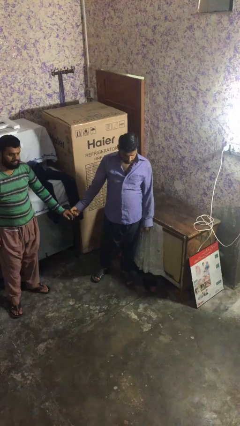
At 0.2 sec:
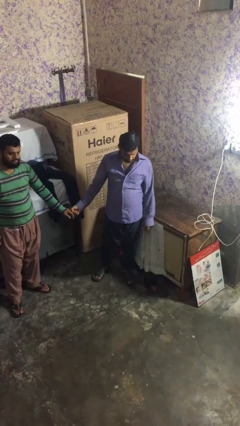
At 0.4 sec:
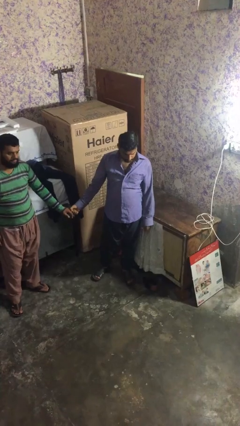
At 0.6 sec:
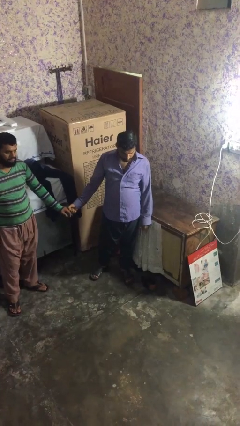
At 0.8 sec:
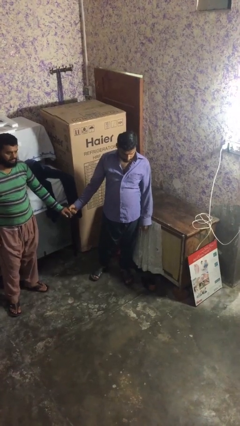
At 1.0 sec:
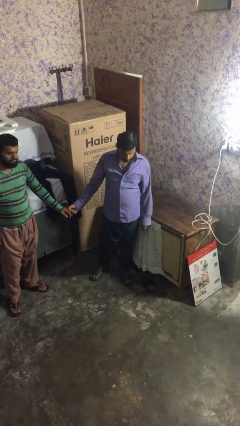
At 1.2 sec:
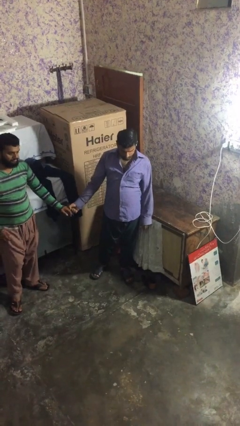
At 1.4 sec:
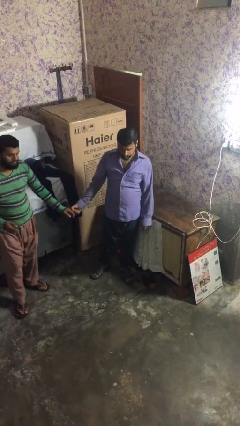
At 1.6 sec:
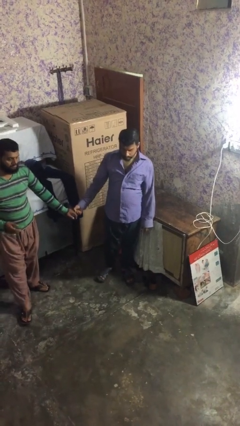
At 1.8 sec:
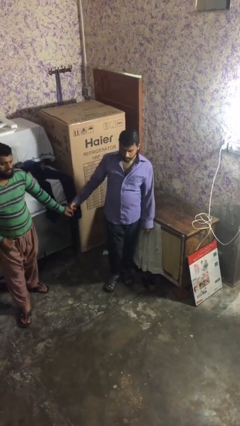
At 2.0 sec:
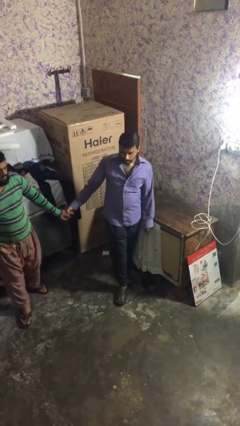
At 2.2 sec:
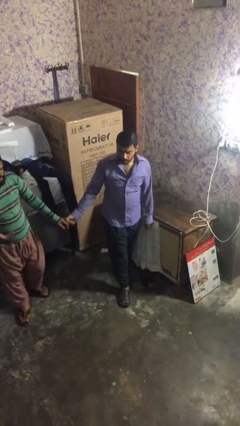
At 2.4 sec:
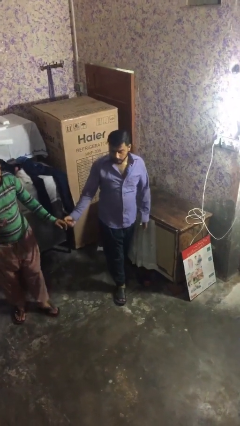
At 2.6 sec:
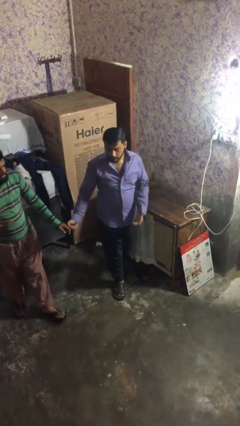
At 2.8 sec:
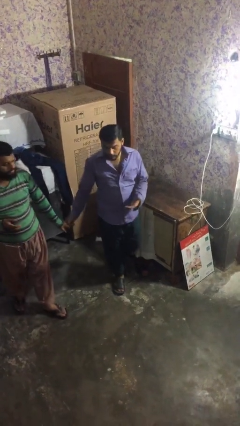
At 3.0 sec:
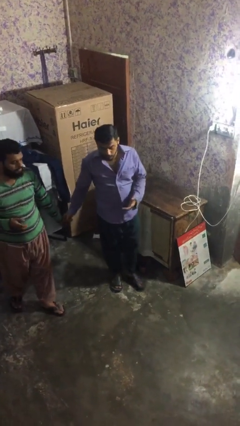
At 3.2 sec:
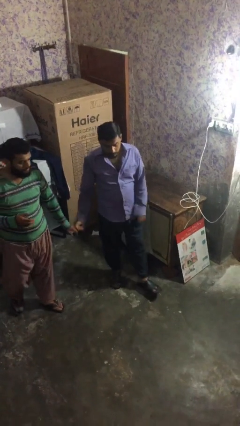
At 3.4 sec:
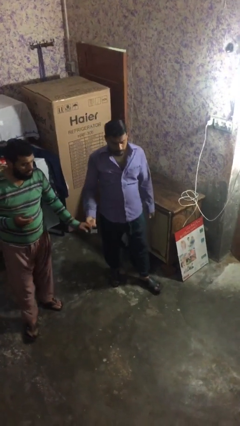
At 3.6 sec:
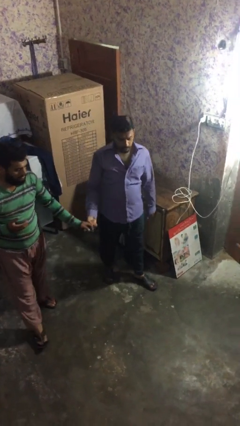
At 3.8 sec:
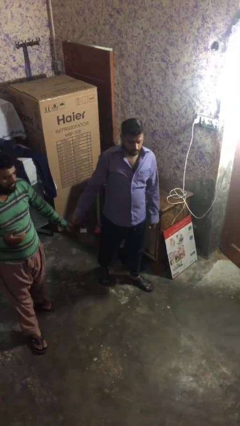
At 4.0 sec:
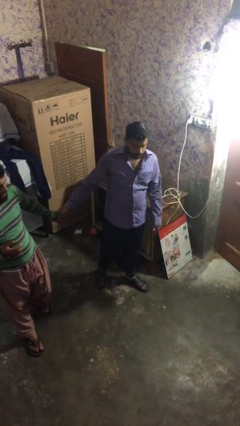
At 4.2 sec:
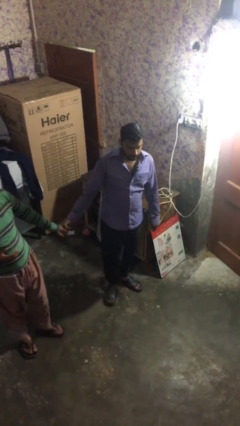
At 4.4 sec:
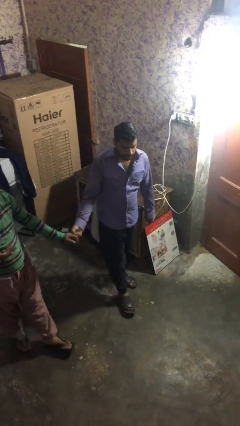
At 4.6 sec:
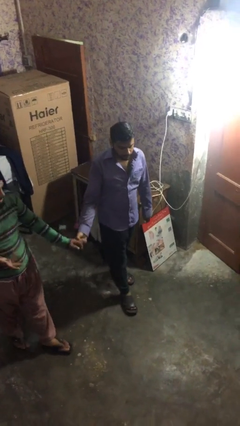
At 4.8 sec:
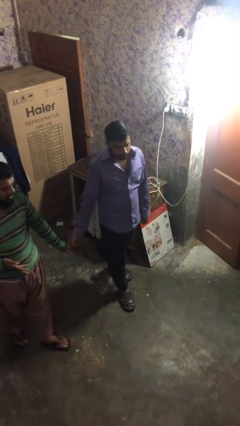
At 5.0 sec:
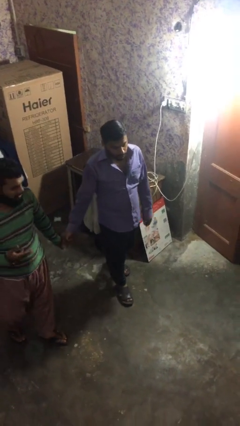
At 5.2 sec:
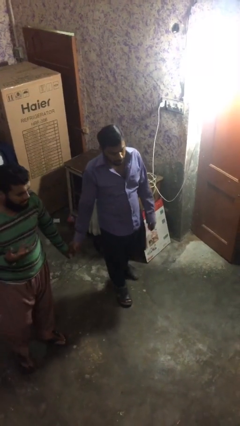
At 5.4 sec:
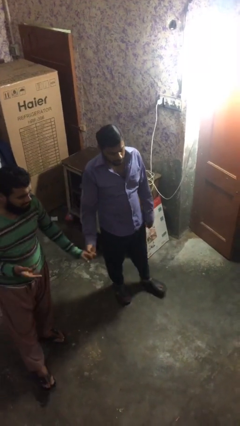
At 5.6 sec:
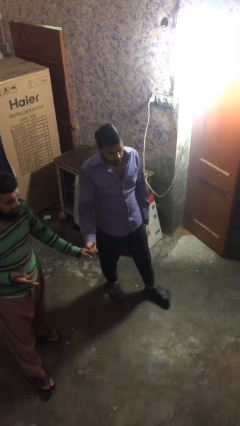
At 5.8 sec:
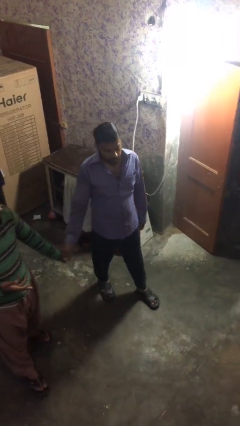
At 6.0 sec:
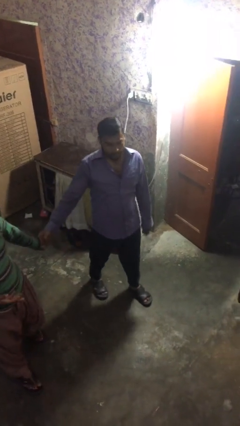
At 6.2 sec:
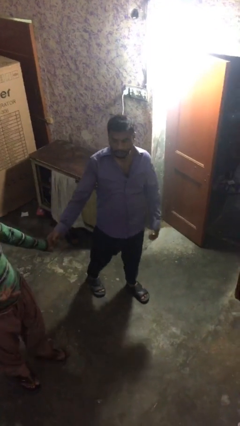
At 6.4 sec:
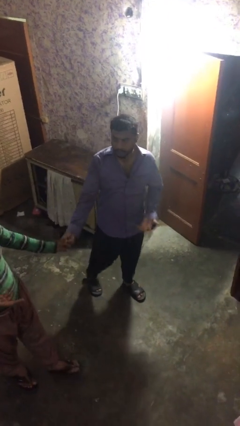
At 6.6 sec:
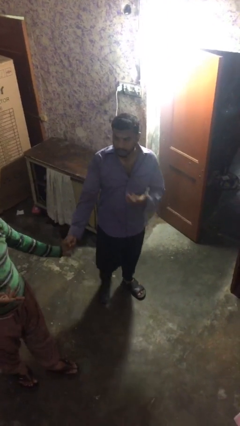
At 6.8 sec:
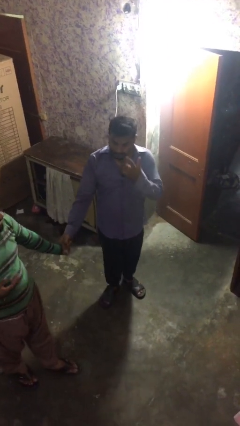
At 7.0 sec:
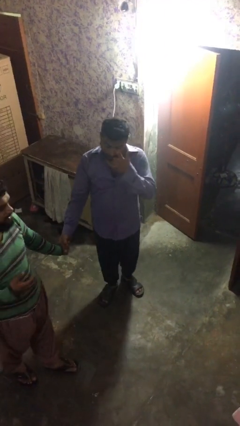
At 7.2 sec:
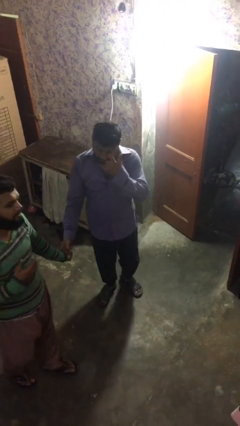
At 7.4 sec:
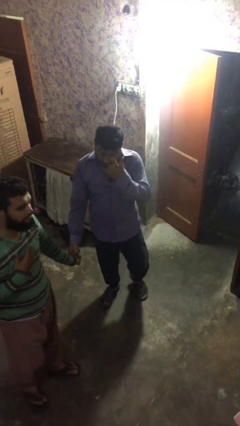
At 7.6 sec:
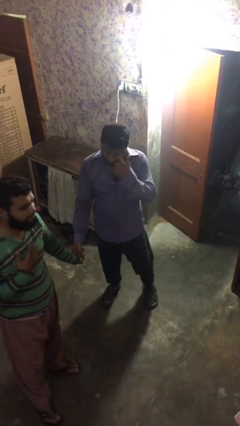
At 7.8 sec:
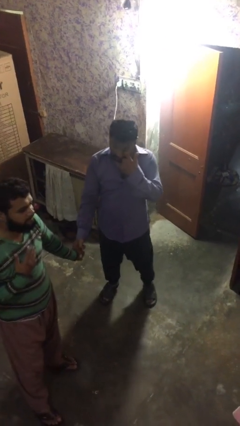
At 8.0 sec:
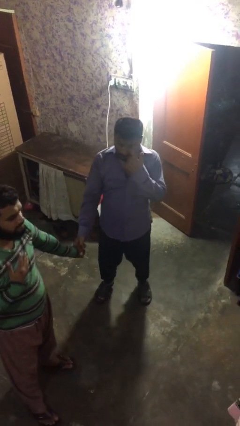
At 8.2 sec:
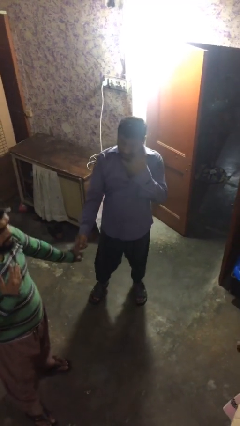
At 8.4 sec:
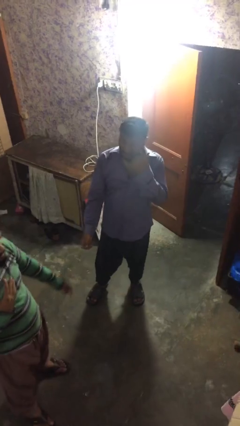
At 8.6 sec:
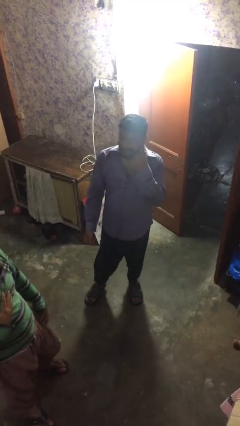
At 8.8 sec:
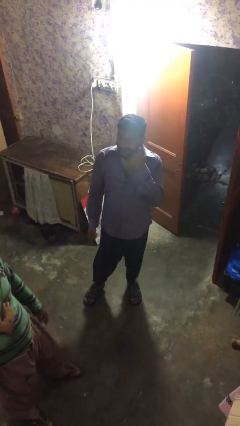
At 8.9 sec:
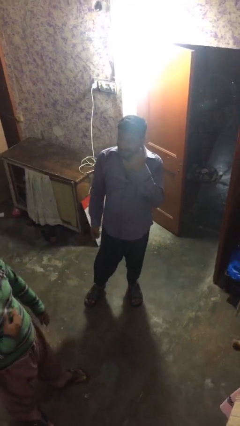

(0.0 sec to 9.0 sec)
person holds hand

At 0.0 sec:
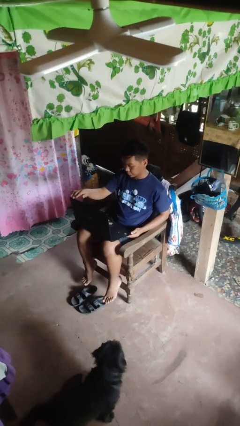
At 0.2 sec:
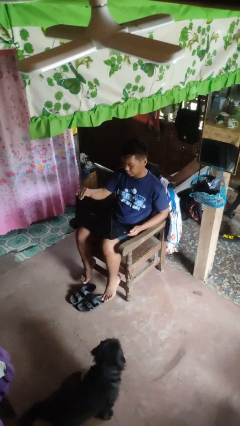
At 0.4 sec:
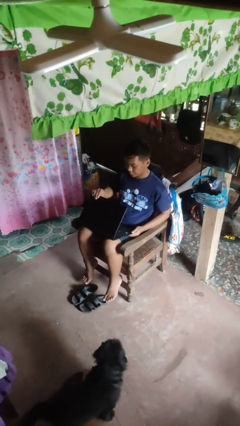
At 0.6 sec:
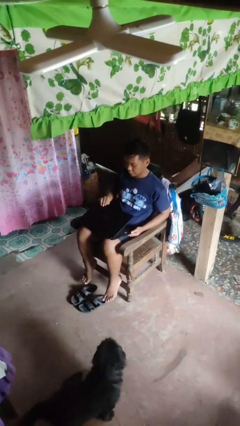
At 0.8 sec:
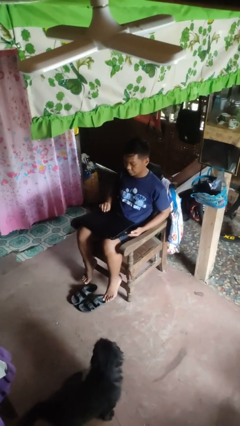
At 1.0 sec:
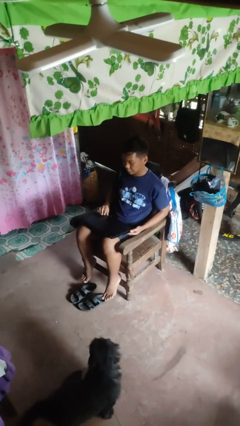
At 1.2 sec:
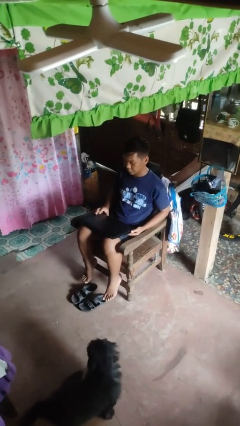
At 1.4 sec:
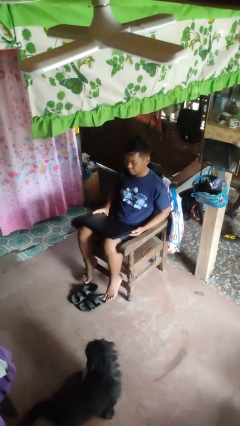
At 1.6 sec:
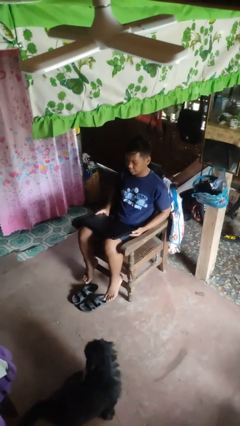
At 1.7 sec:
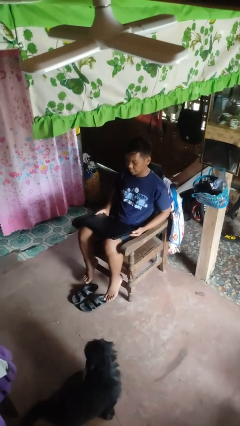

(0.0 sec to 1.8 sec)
person closes laptop

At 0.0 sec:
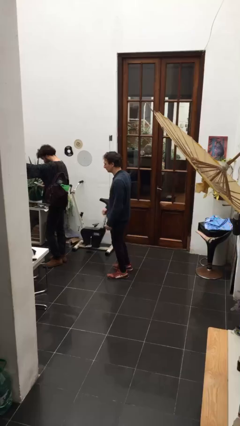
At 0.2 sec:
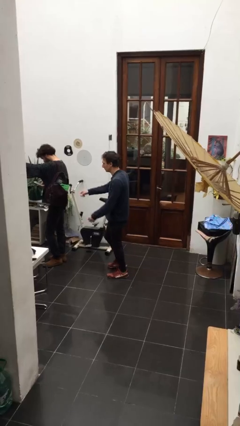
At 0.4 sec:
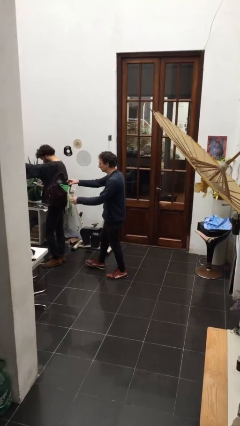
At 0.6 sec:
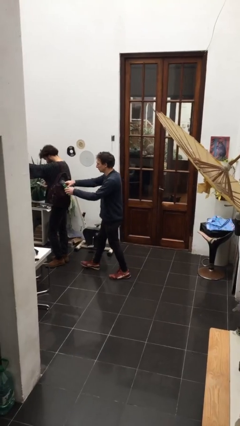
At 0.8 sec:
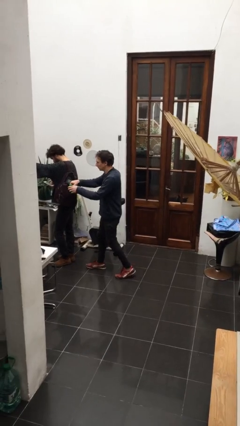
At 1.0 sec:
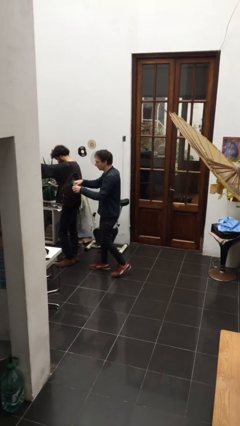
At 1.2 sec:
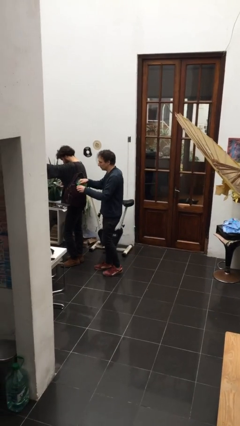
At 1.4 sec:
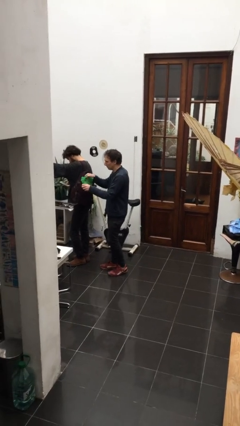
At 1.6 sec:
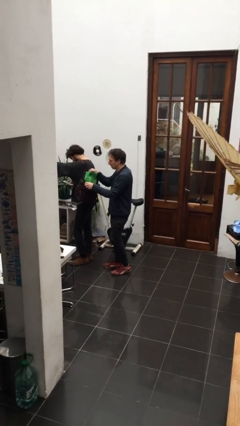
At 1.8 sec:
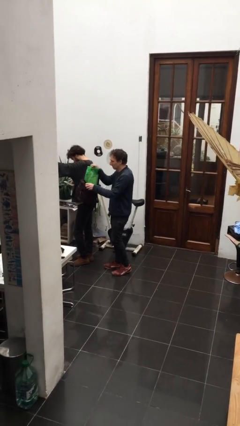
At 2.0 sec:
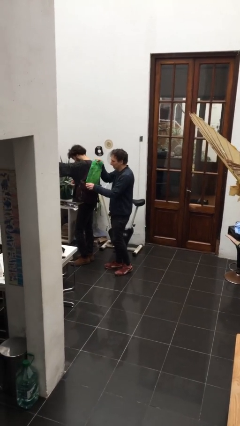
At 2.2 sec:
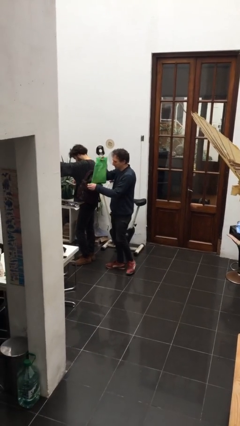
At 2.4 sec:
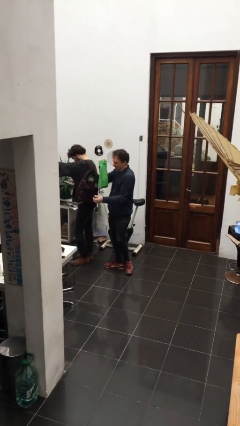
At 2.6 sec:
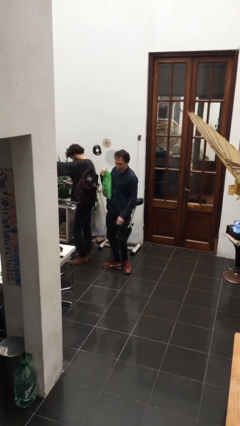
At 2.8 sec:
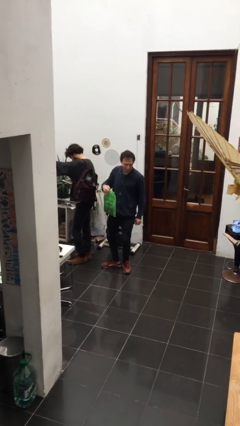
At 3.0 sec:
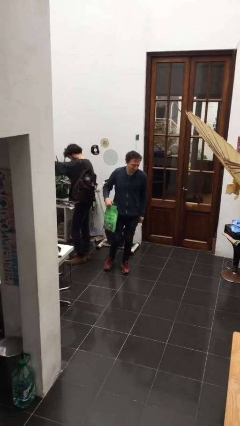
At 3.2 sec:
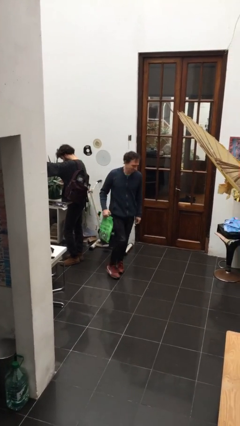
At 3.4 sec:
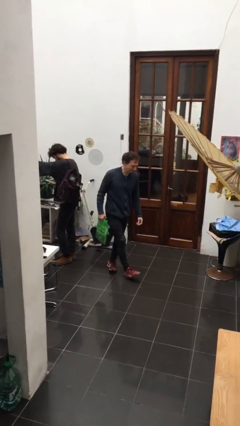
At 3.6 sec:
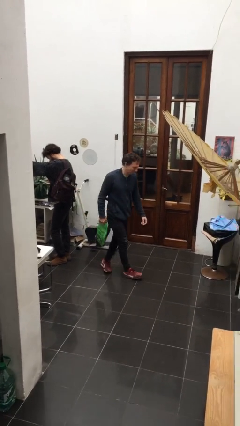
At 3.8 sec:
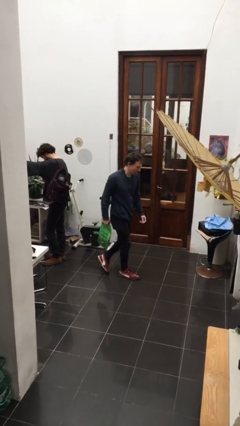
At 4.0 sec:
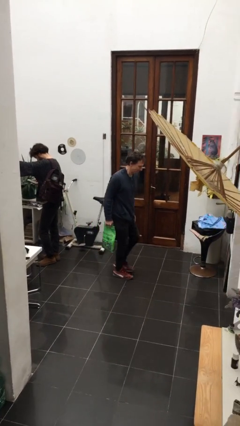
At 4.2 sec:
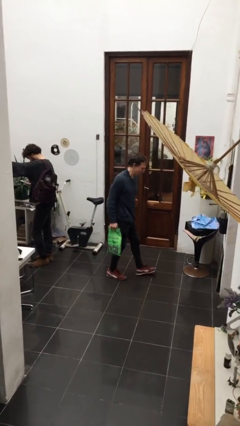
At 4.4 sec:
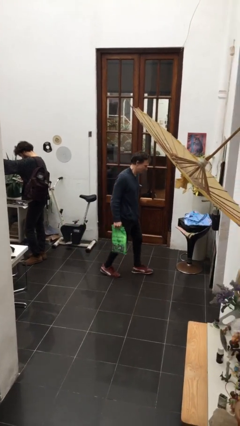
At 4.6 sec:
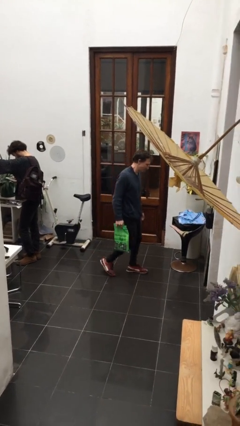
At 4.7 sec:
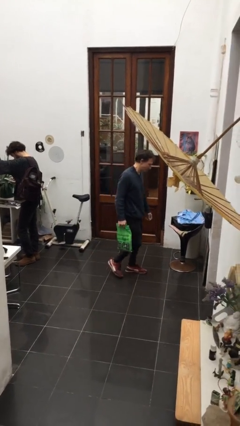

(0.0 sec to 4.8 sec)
person steals object from person

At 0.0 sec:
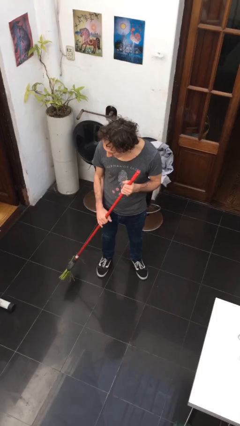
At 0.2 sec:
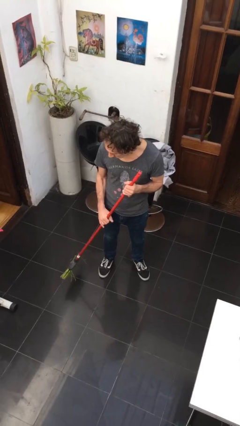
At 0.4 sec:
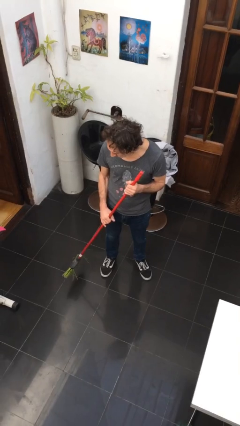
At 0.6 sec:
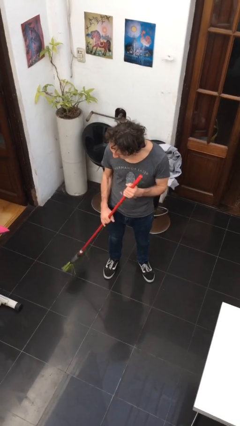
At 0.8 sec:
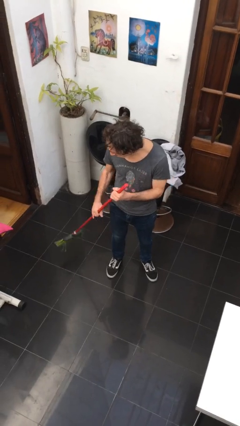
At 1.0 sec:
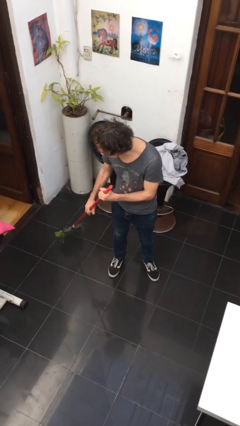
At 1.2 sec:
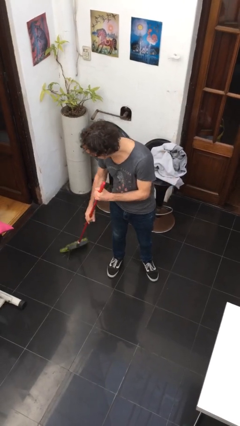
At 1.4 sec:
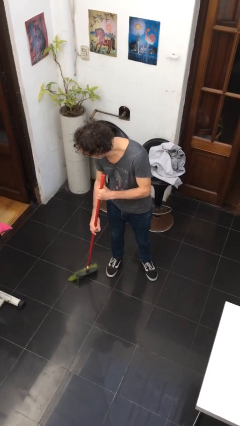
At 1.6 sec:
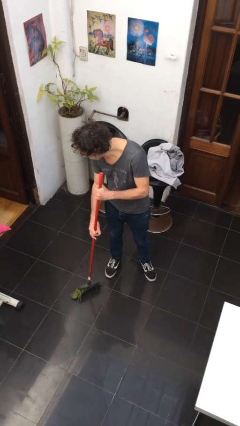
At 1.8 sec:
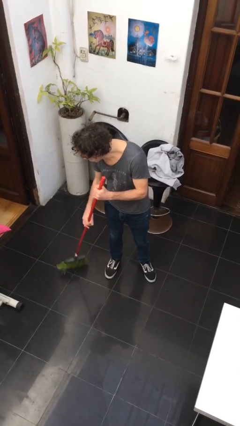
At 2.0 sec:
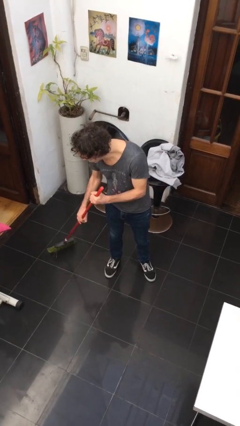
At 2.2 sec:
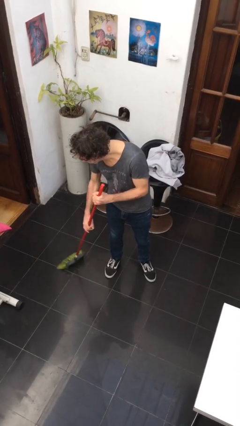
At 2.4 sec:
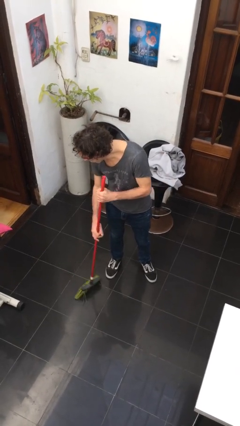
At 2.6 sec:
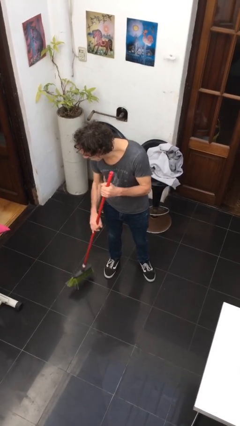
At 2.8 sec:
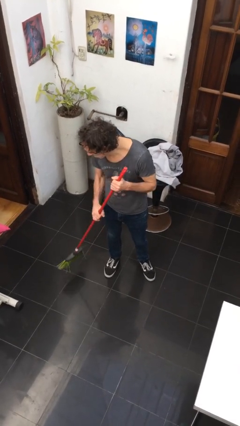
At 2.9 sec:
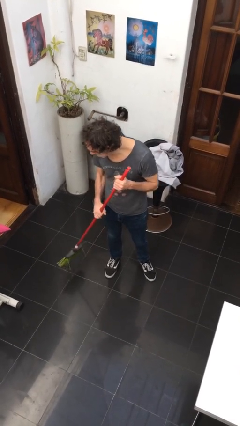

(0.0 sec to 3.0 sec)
person sweeps floor
